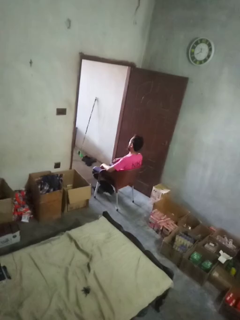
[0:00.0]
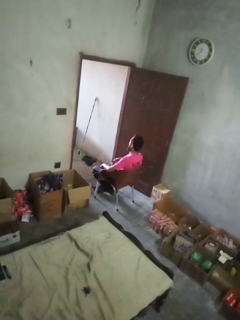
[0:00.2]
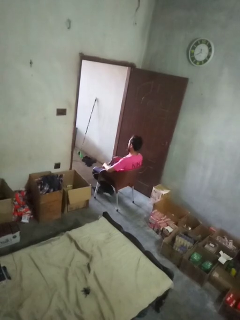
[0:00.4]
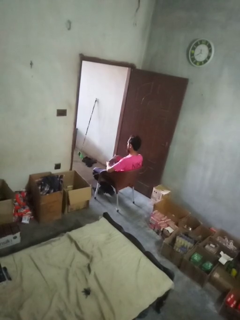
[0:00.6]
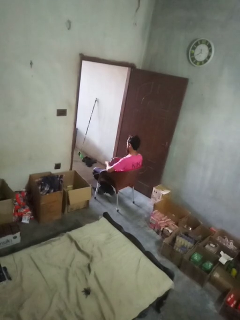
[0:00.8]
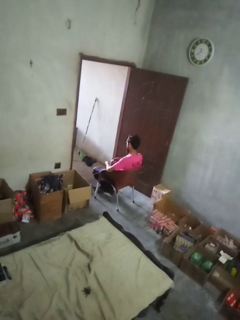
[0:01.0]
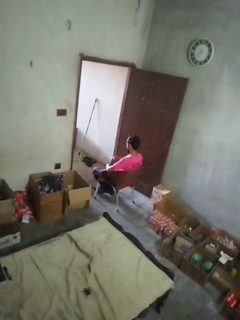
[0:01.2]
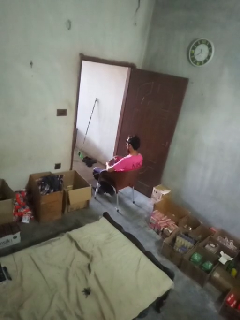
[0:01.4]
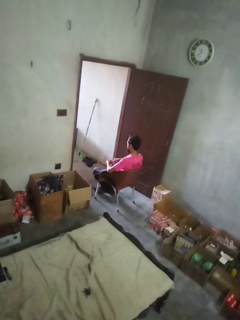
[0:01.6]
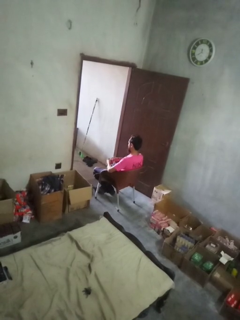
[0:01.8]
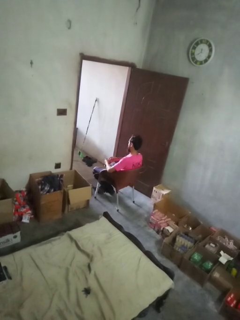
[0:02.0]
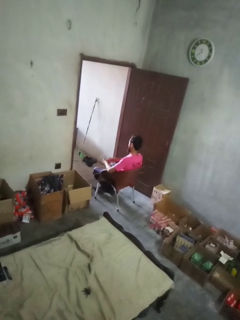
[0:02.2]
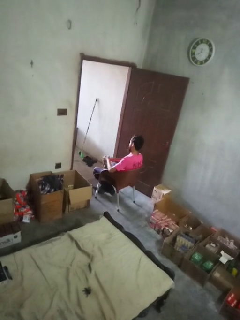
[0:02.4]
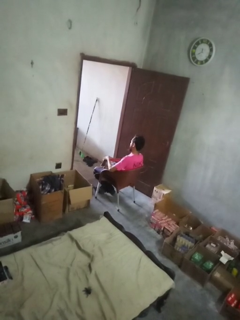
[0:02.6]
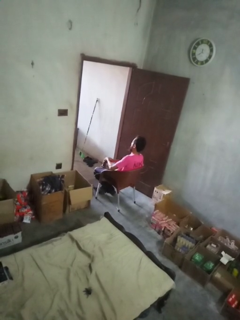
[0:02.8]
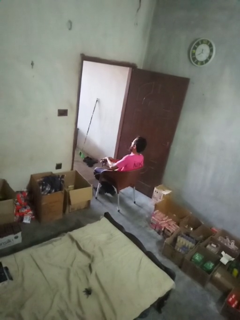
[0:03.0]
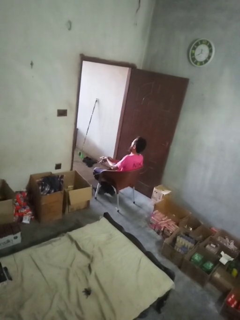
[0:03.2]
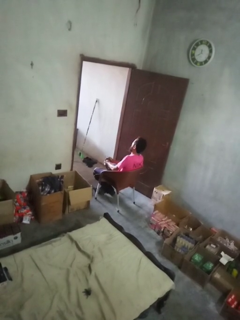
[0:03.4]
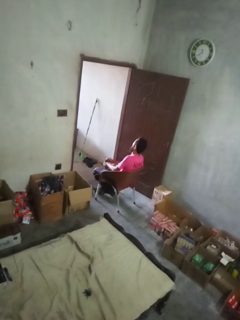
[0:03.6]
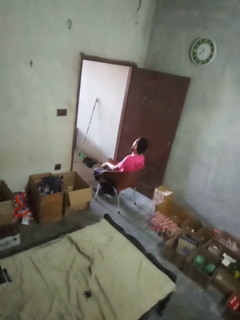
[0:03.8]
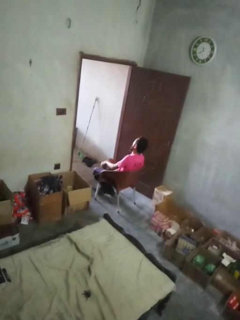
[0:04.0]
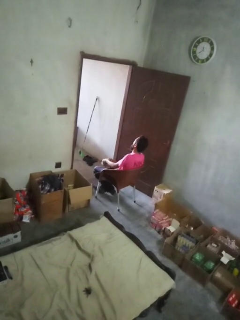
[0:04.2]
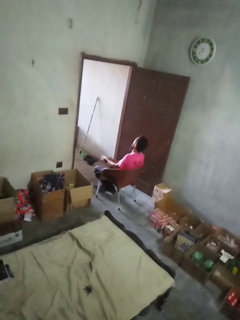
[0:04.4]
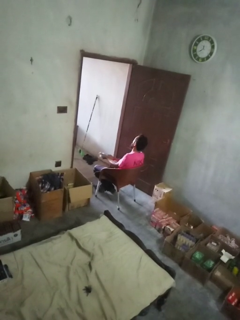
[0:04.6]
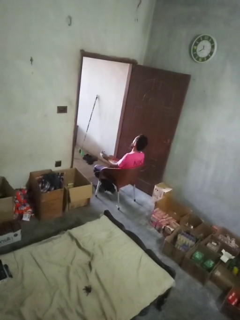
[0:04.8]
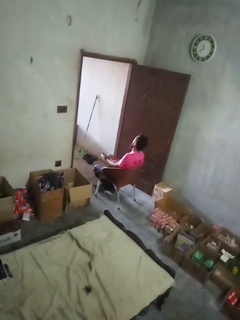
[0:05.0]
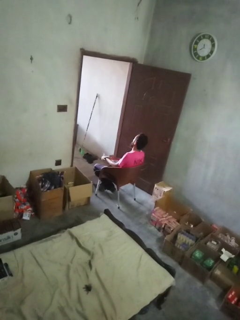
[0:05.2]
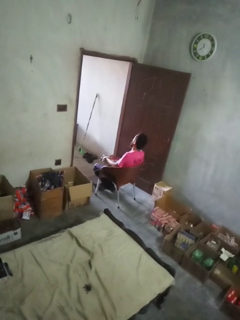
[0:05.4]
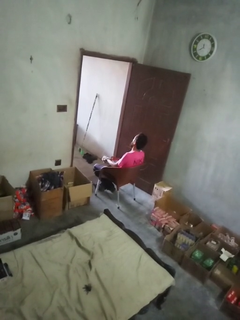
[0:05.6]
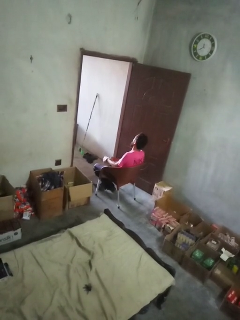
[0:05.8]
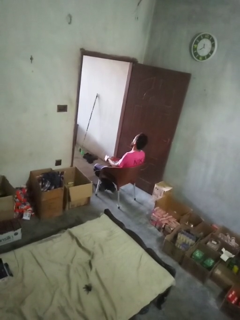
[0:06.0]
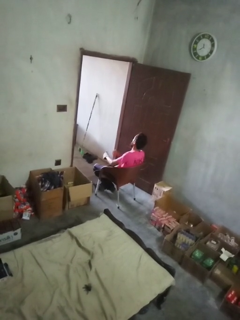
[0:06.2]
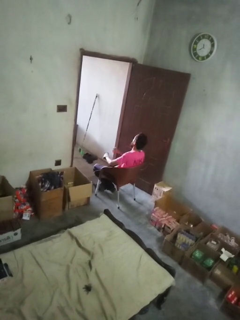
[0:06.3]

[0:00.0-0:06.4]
person puts on gloves

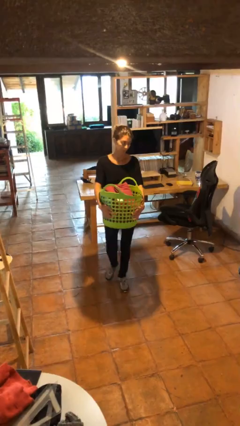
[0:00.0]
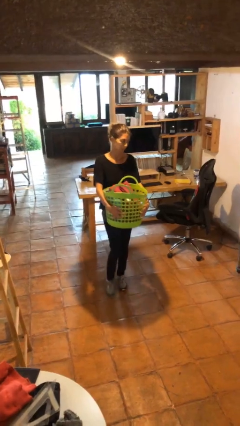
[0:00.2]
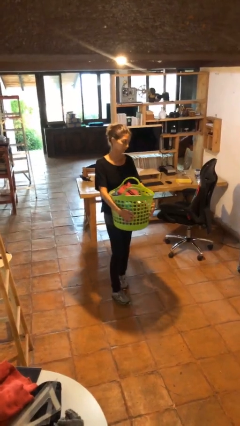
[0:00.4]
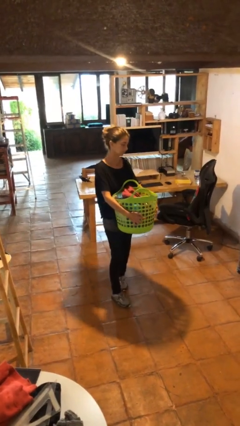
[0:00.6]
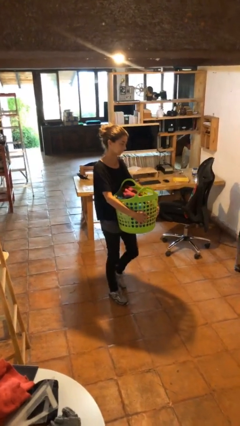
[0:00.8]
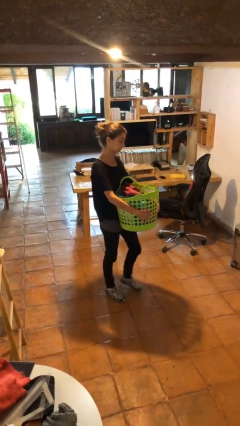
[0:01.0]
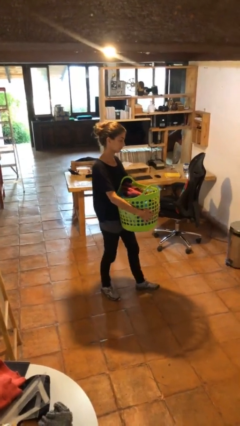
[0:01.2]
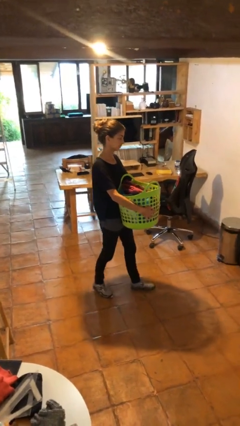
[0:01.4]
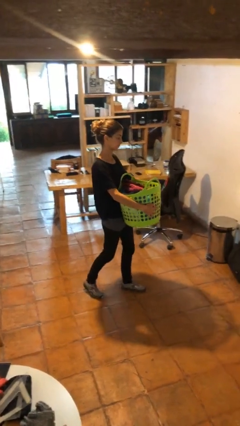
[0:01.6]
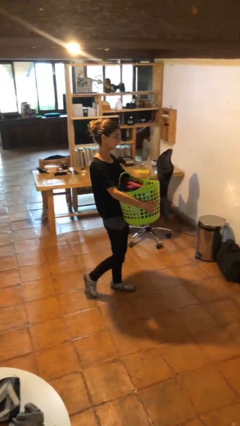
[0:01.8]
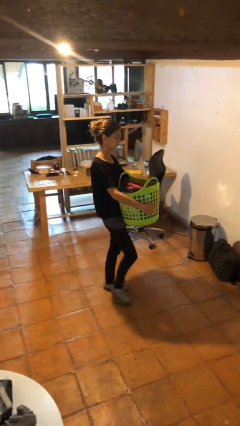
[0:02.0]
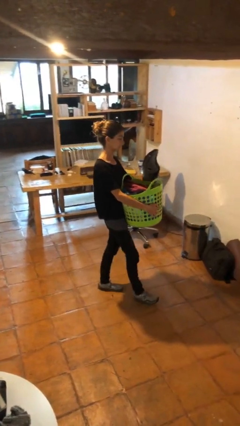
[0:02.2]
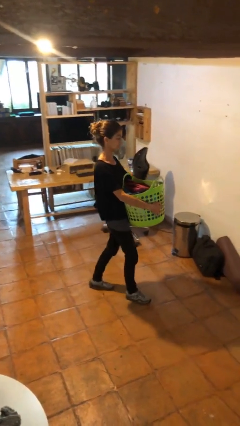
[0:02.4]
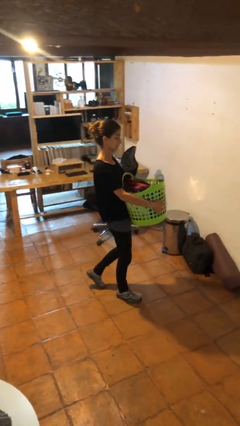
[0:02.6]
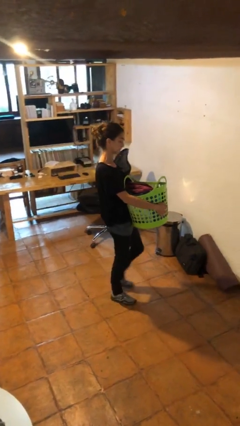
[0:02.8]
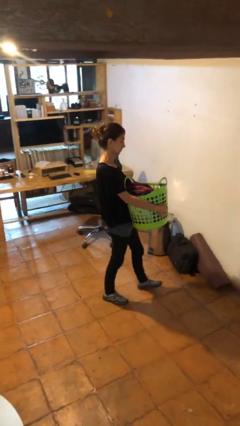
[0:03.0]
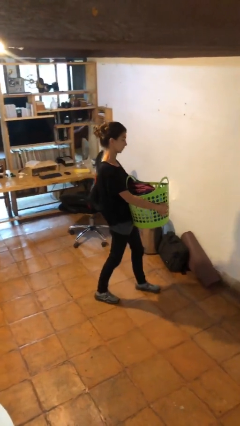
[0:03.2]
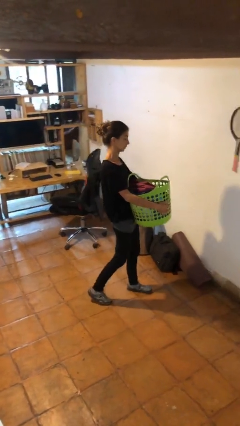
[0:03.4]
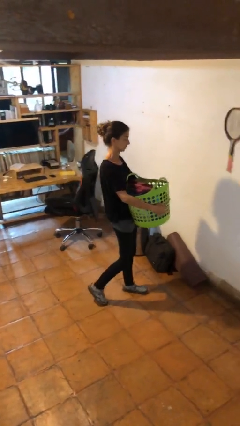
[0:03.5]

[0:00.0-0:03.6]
person carries laundry basket

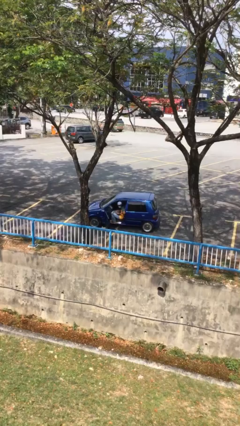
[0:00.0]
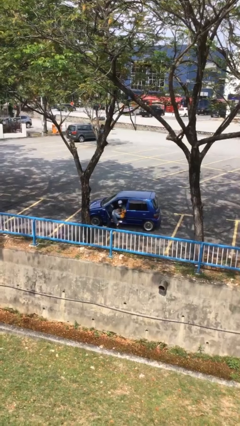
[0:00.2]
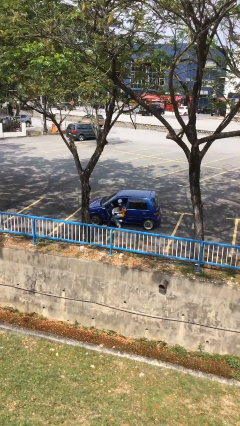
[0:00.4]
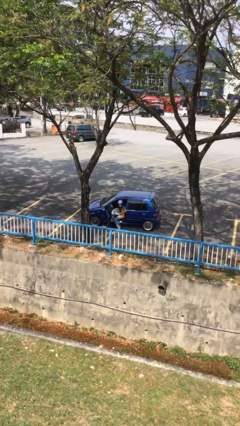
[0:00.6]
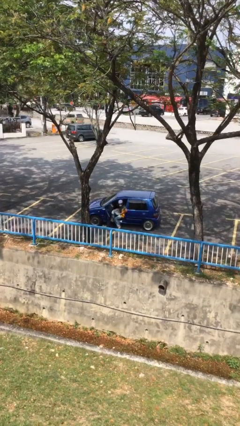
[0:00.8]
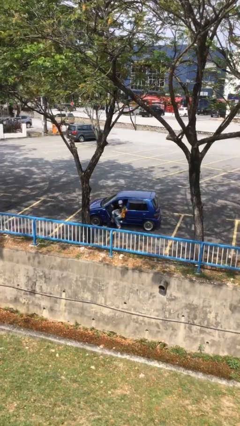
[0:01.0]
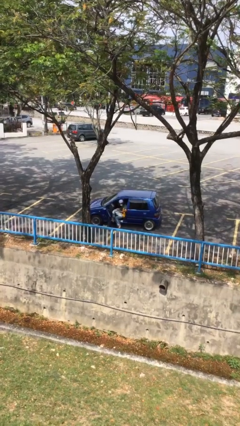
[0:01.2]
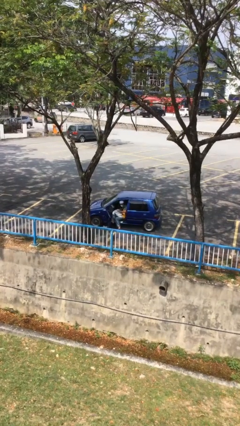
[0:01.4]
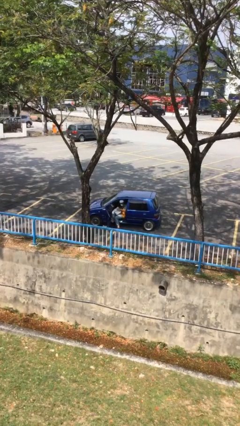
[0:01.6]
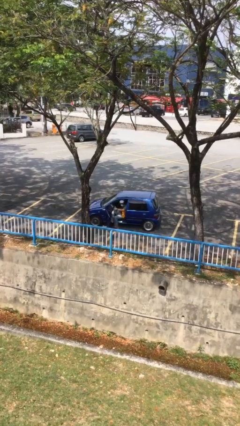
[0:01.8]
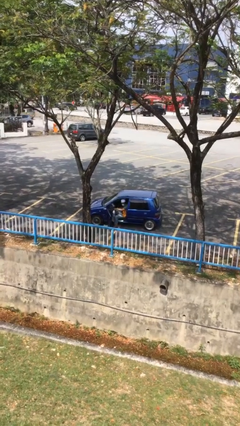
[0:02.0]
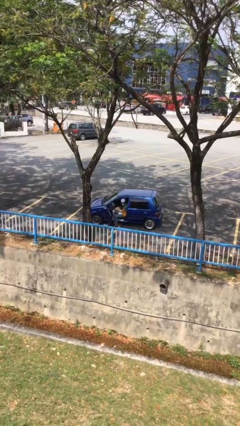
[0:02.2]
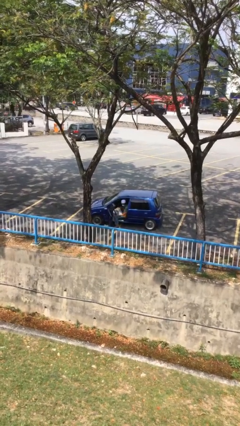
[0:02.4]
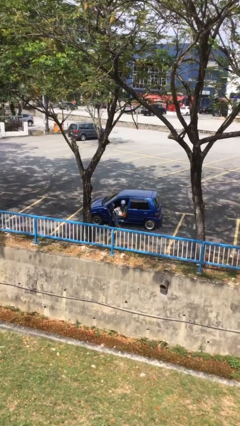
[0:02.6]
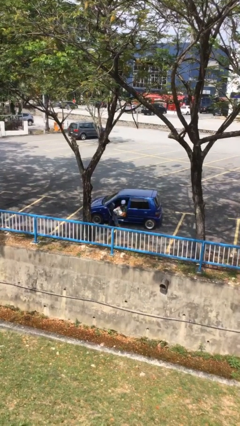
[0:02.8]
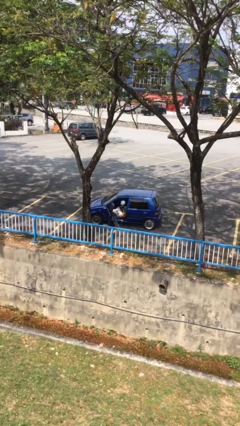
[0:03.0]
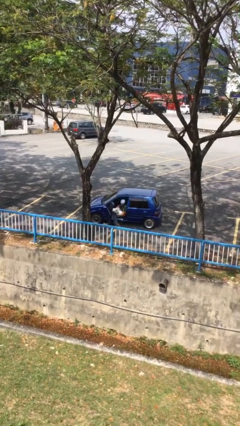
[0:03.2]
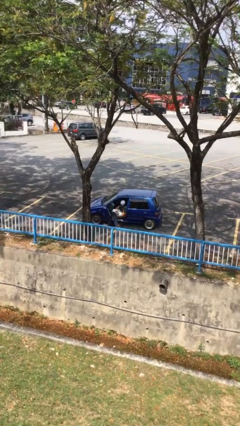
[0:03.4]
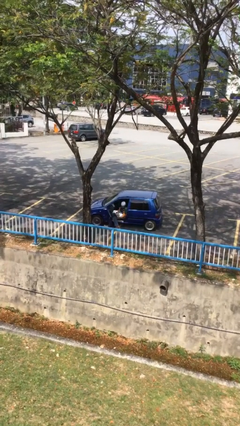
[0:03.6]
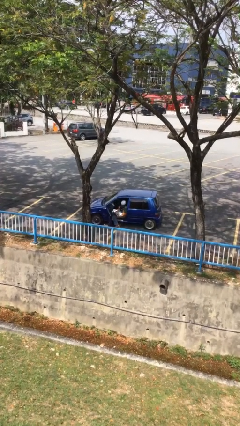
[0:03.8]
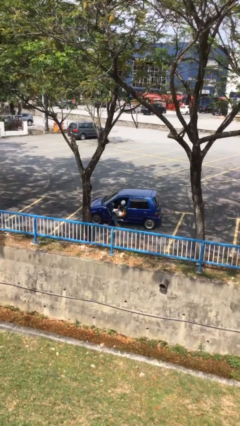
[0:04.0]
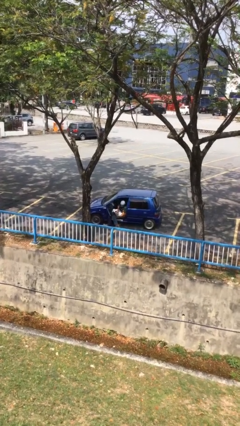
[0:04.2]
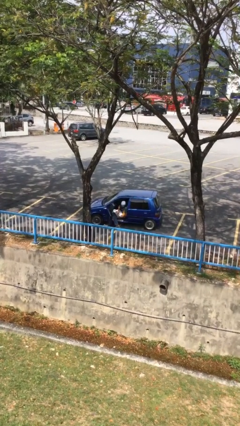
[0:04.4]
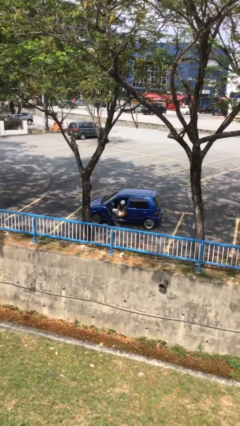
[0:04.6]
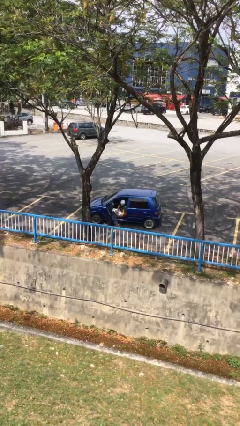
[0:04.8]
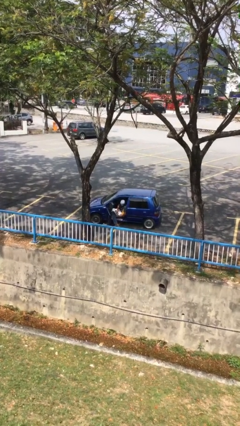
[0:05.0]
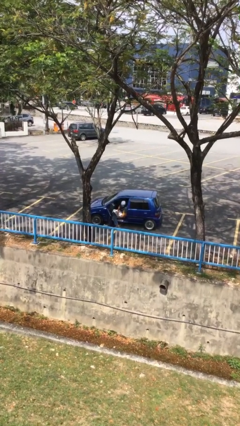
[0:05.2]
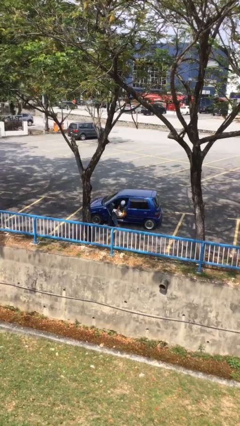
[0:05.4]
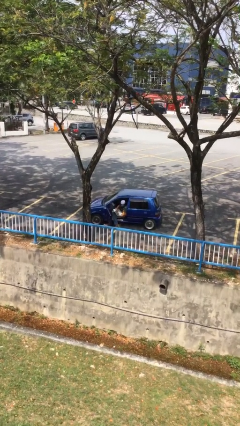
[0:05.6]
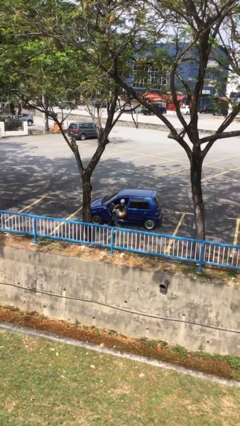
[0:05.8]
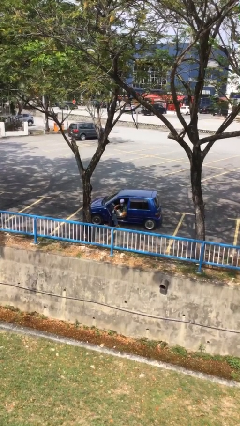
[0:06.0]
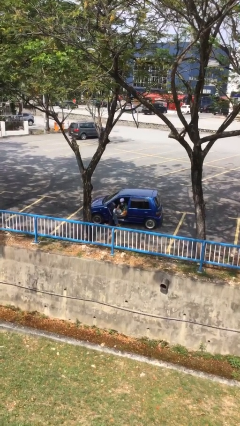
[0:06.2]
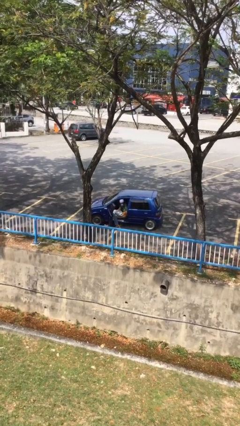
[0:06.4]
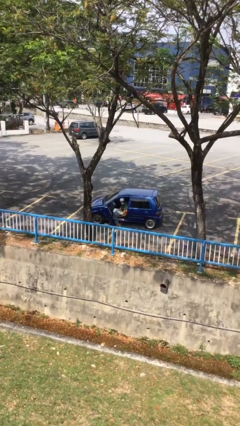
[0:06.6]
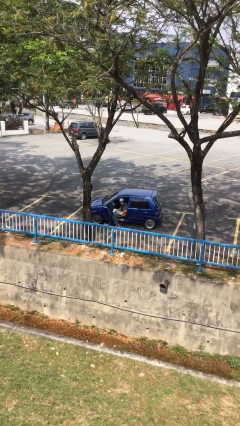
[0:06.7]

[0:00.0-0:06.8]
person interacts with laptop

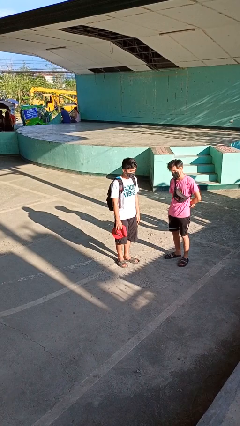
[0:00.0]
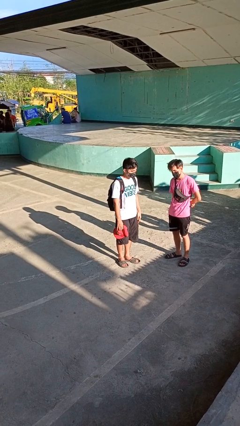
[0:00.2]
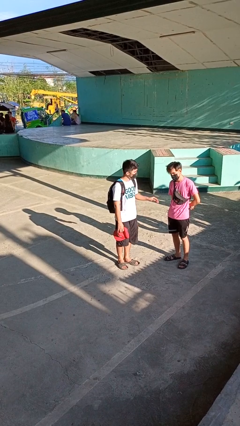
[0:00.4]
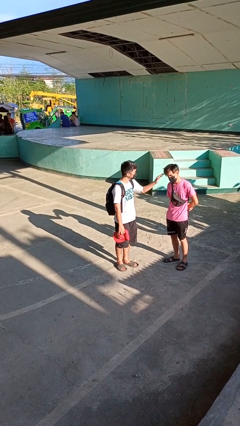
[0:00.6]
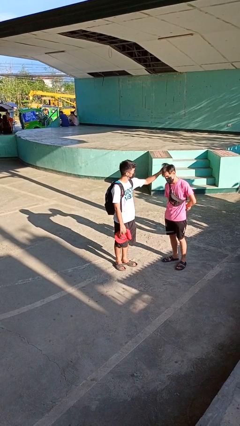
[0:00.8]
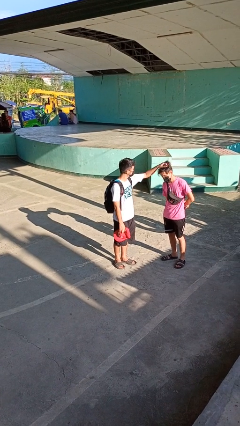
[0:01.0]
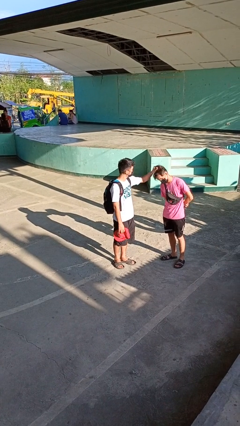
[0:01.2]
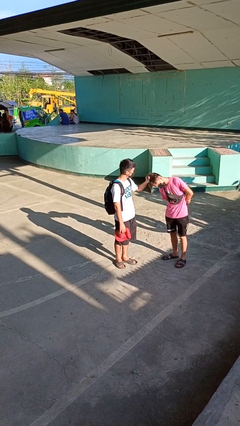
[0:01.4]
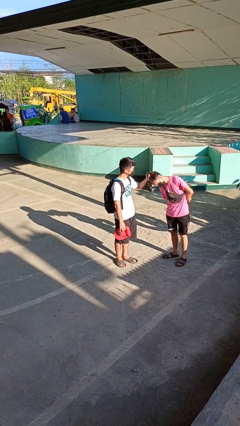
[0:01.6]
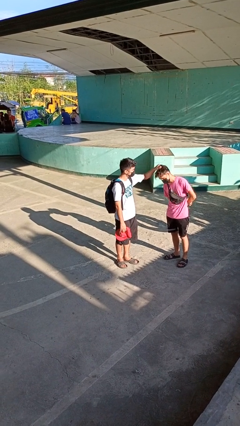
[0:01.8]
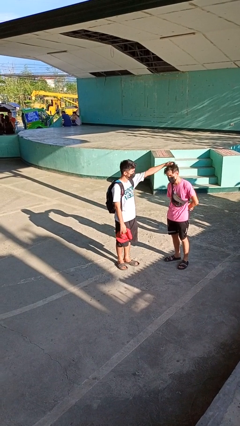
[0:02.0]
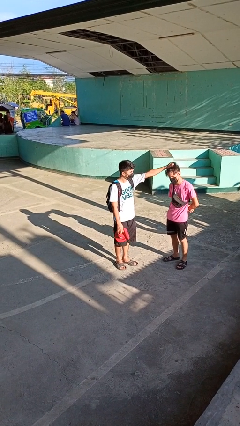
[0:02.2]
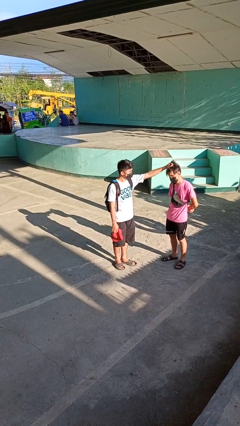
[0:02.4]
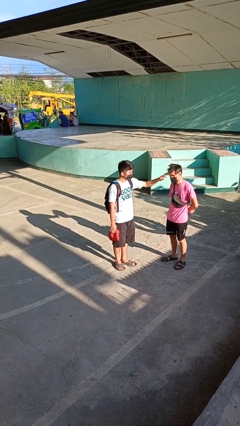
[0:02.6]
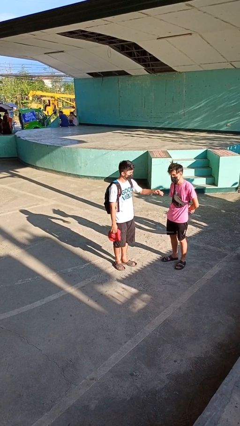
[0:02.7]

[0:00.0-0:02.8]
person grabs person by hair
